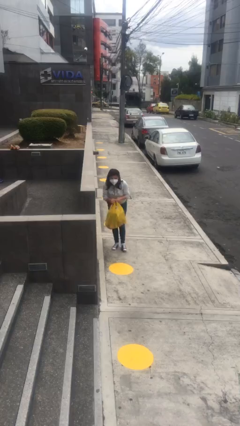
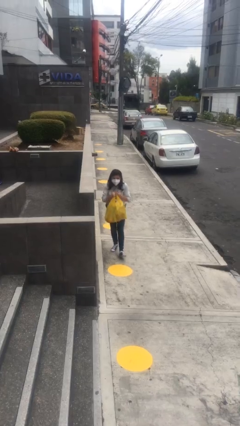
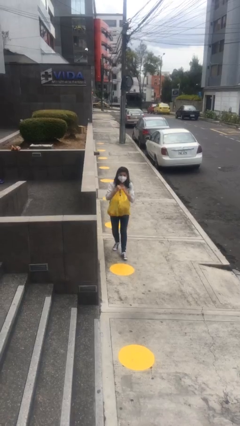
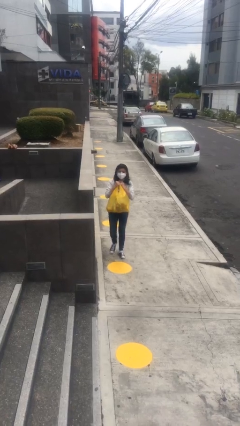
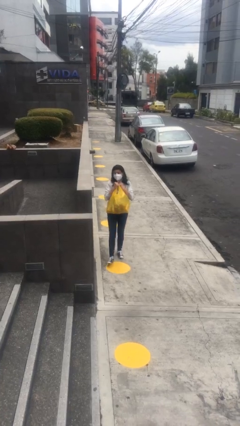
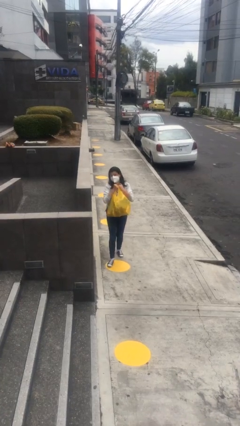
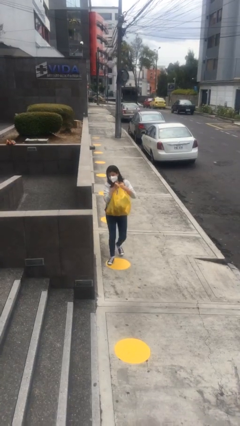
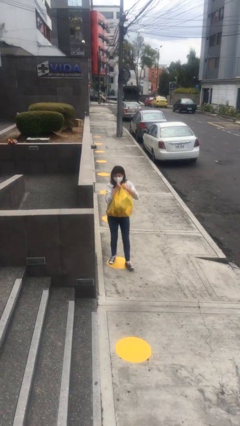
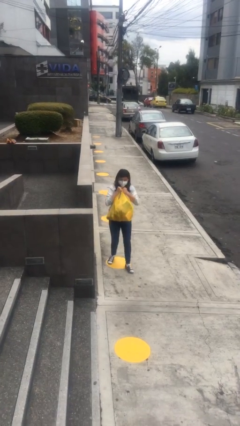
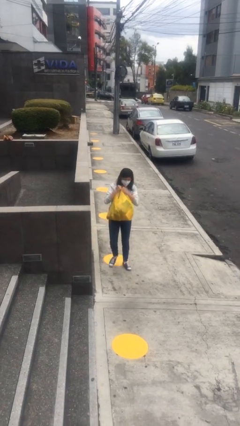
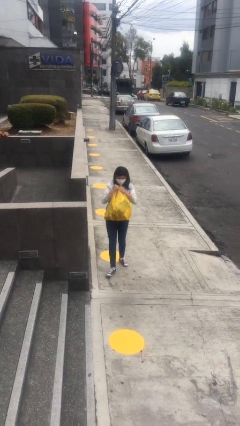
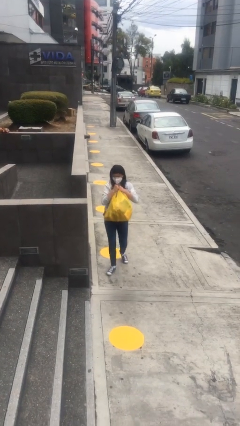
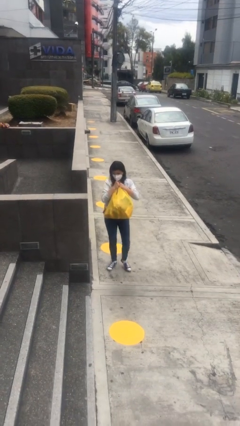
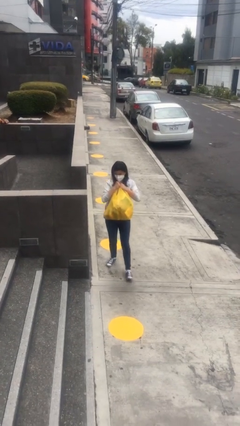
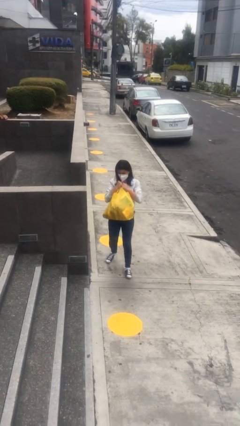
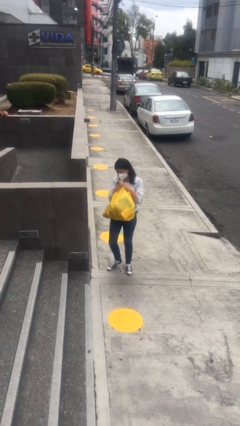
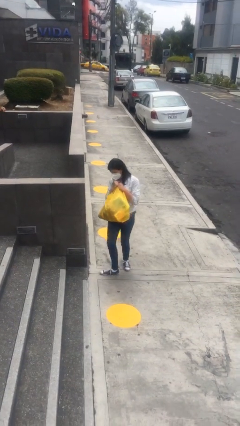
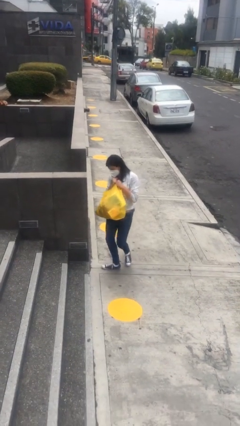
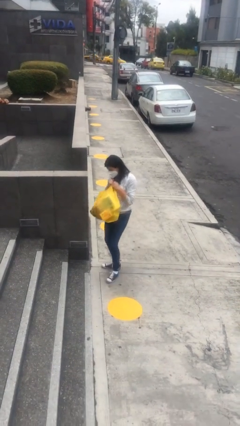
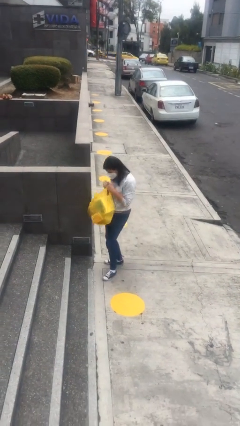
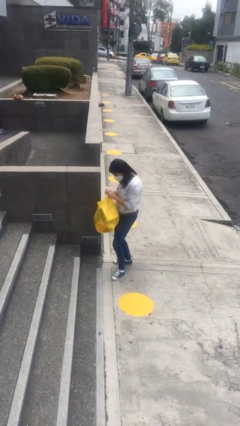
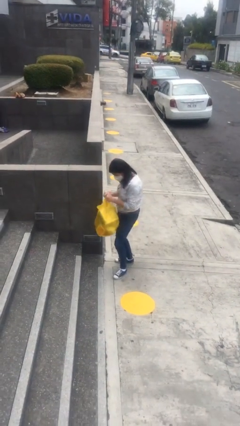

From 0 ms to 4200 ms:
person carries heavy object

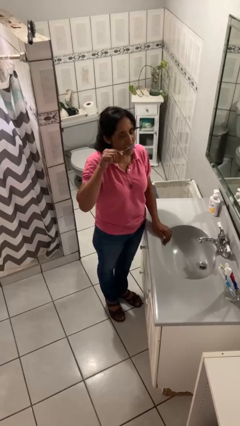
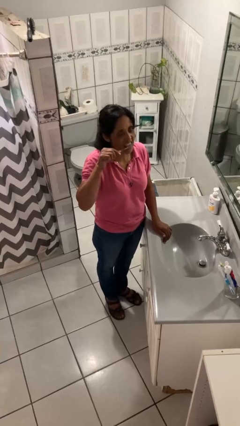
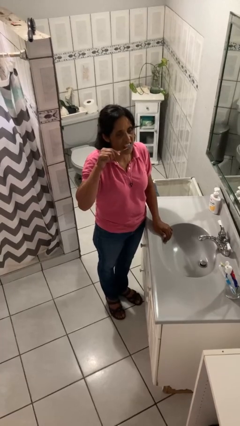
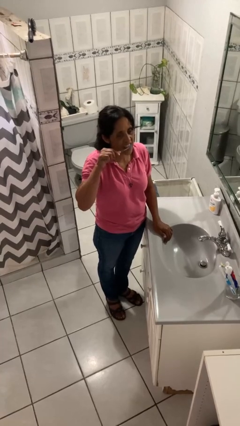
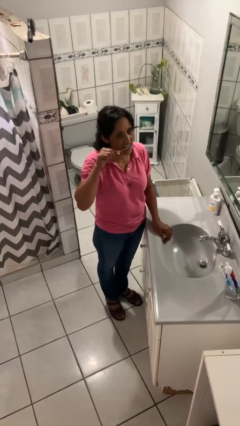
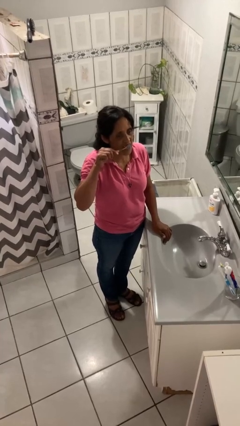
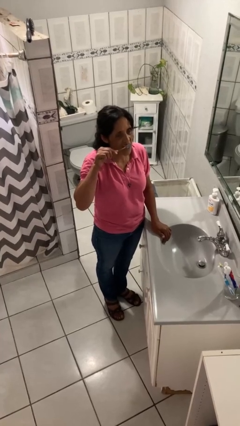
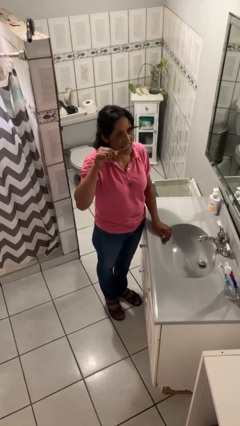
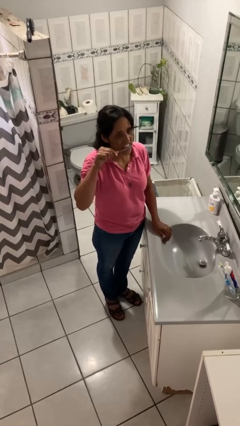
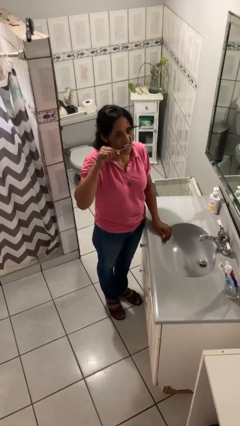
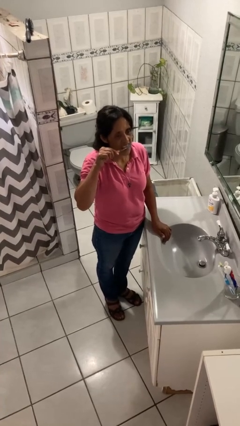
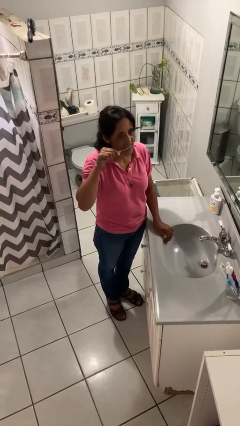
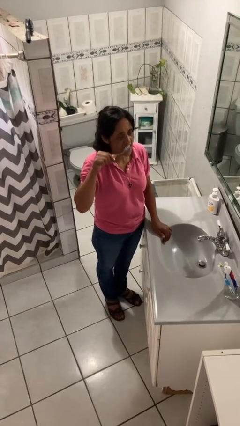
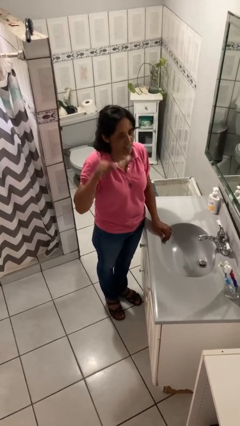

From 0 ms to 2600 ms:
person brushes teeth

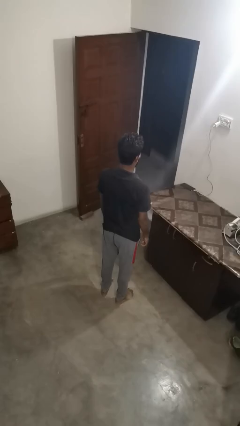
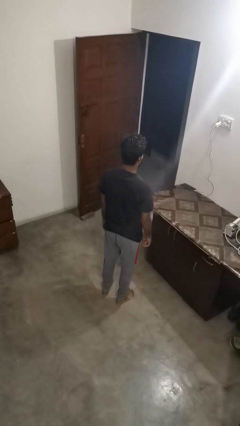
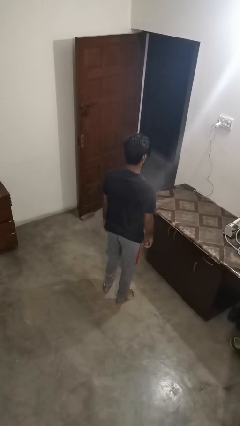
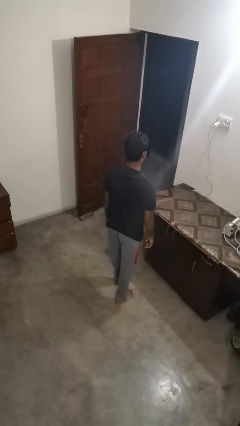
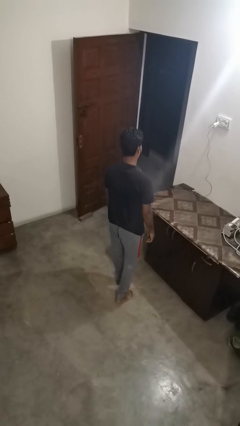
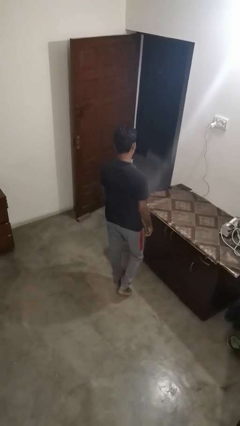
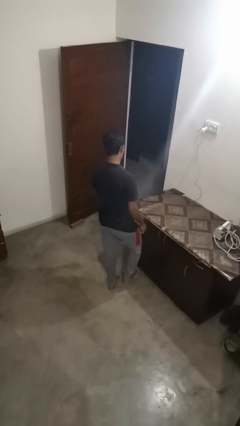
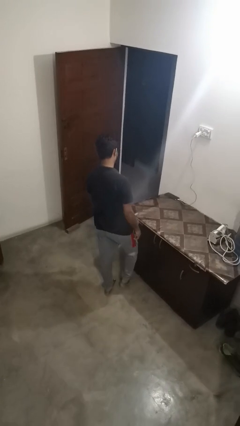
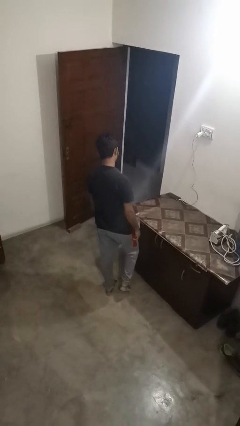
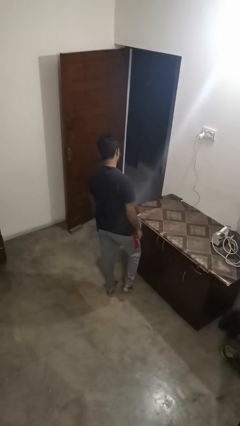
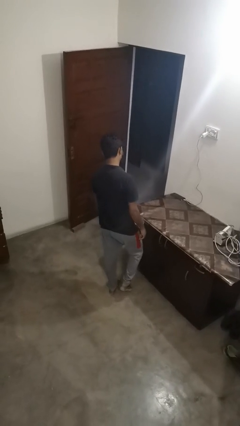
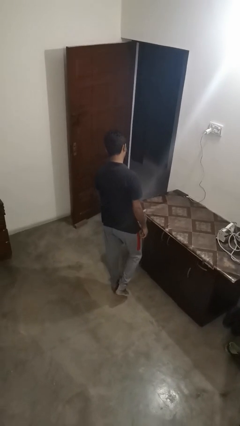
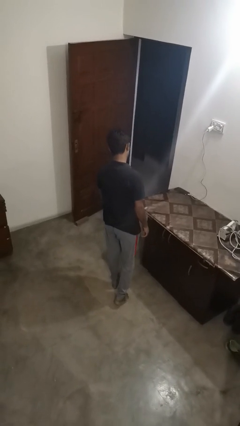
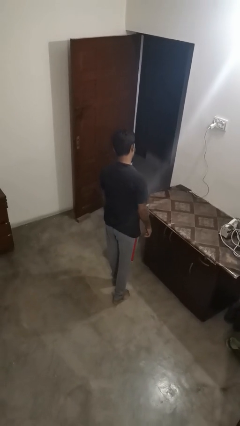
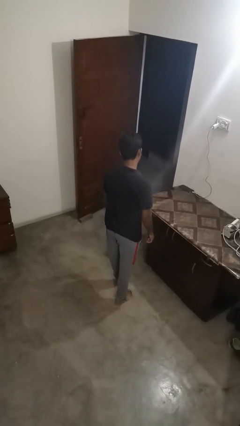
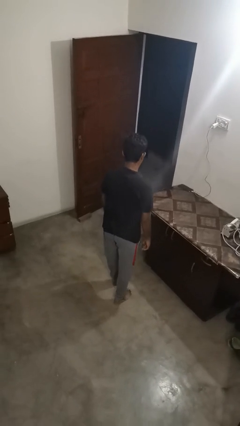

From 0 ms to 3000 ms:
person bumps into table

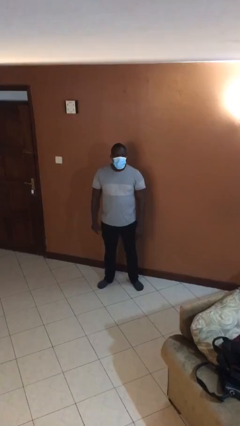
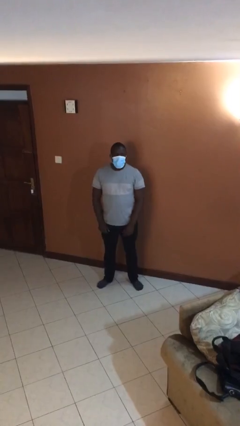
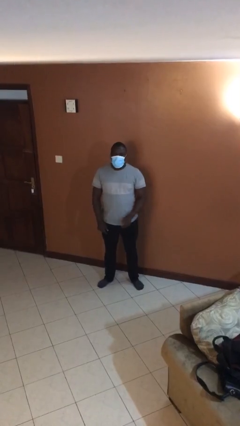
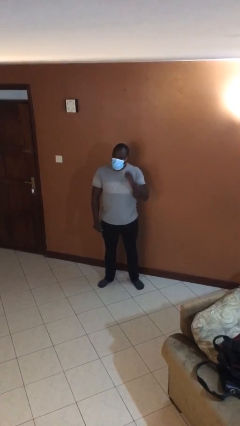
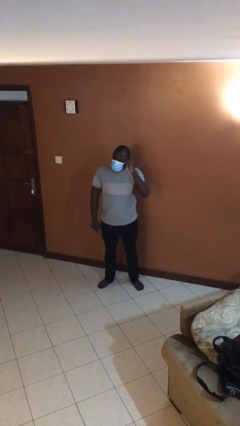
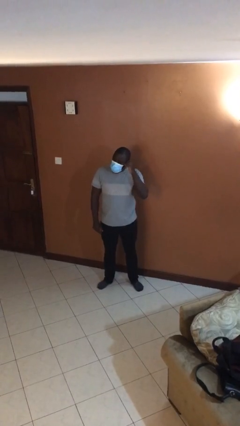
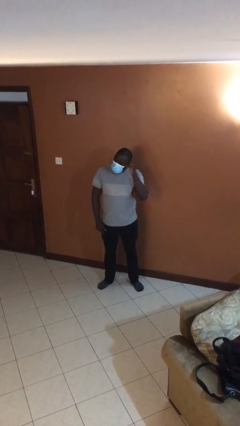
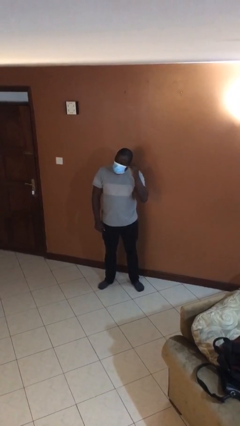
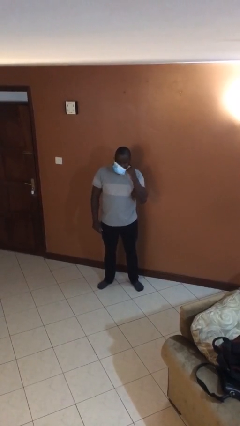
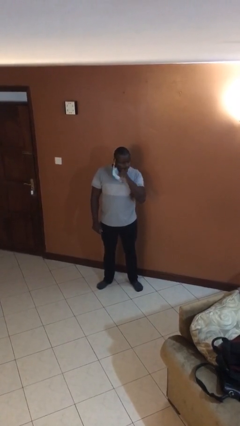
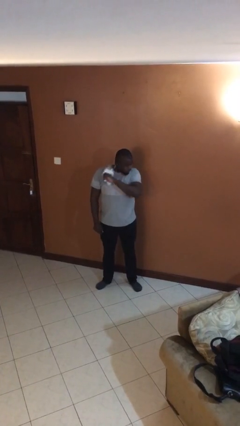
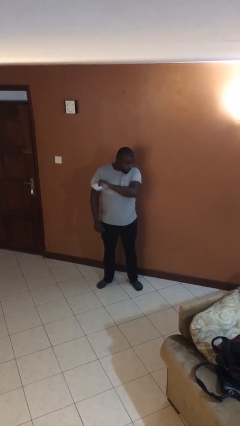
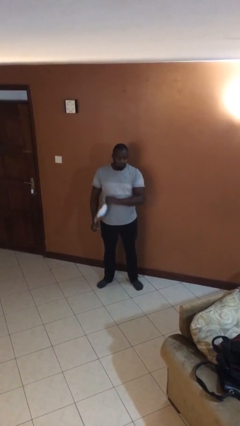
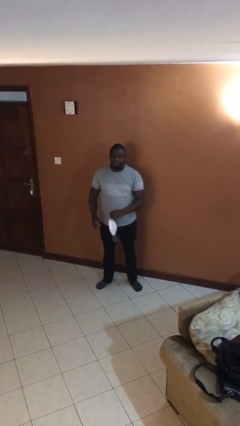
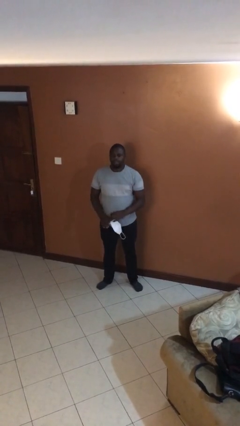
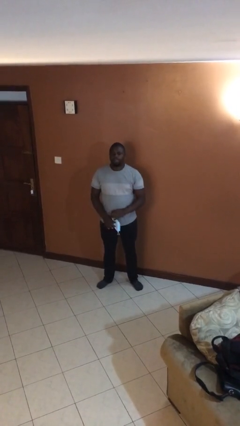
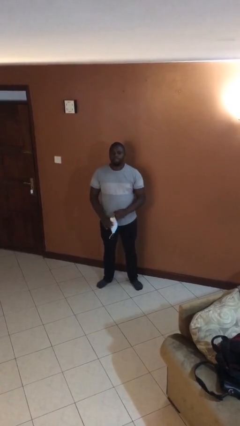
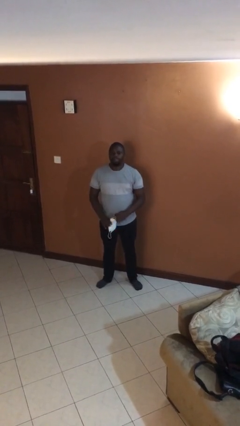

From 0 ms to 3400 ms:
person takes off facemask

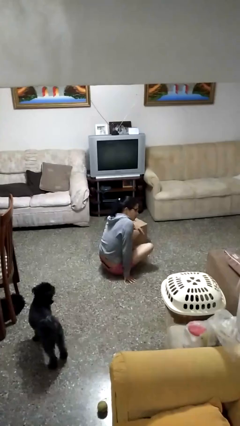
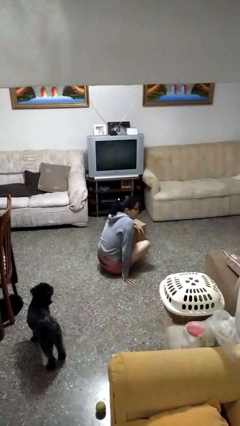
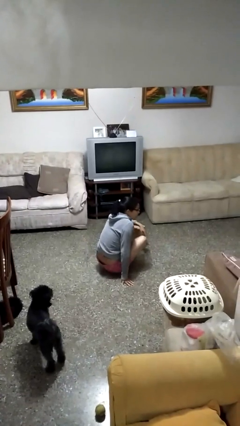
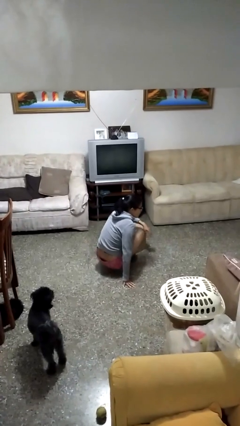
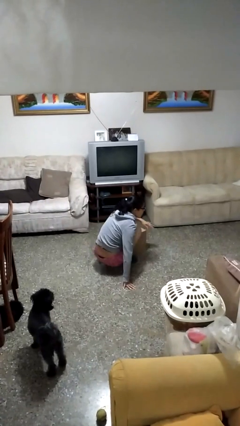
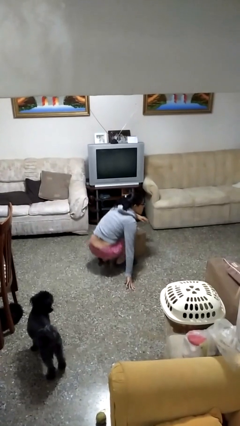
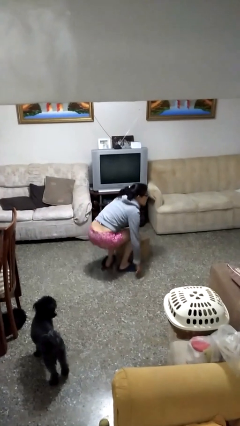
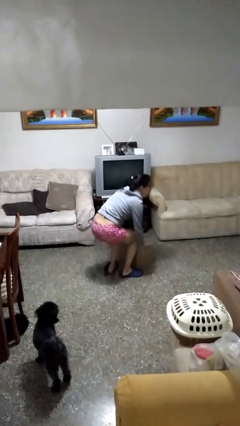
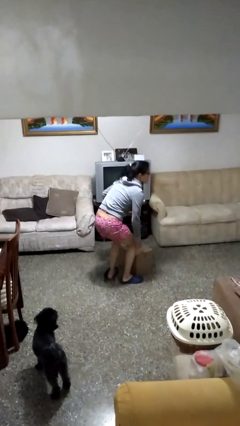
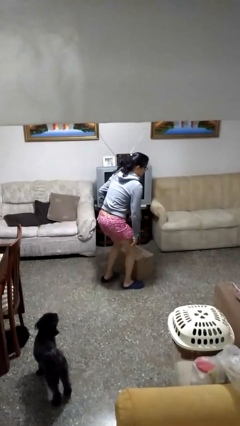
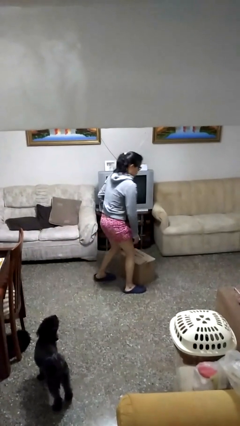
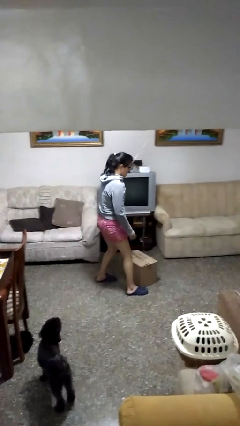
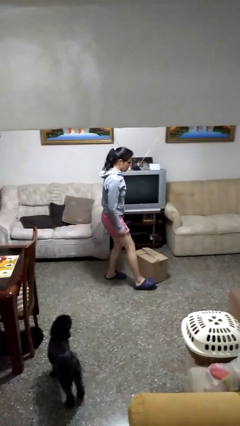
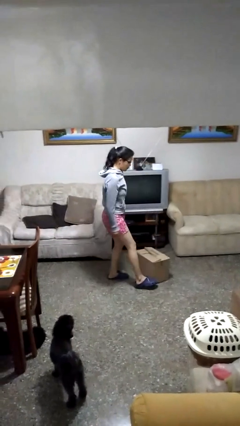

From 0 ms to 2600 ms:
person stands up from floor

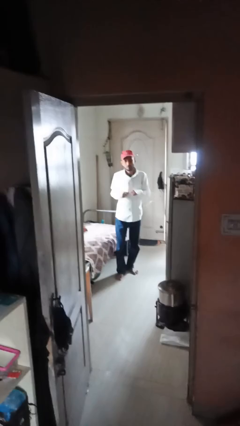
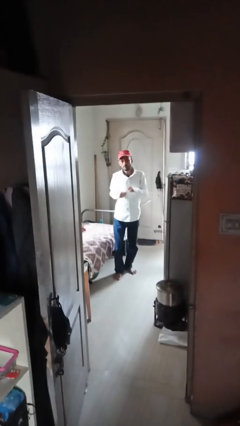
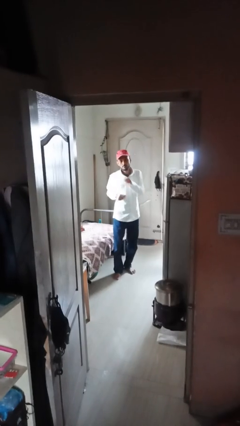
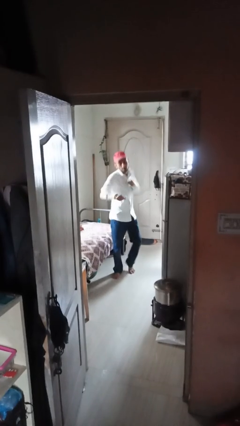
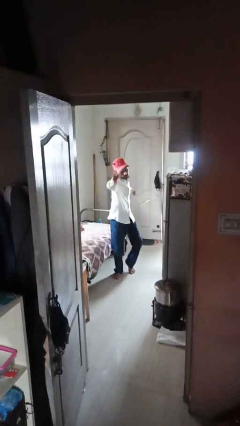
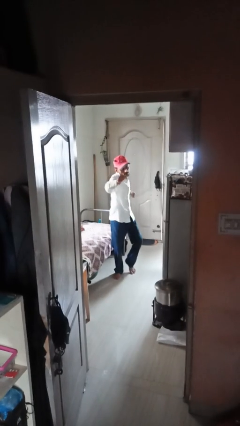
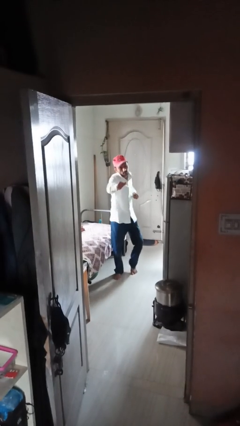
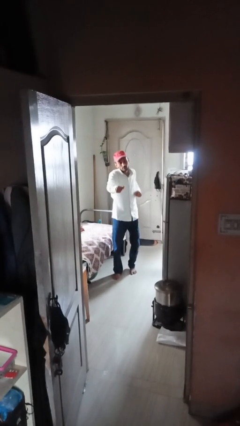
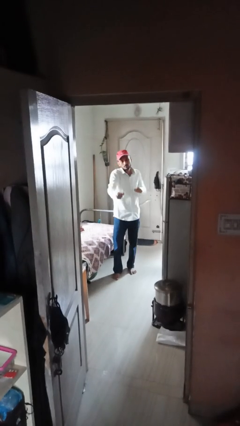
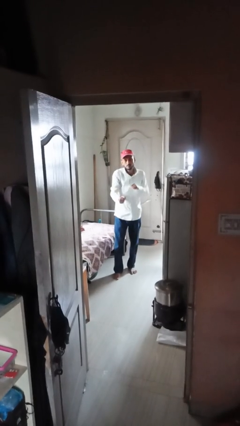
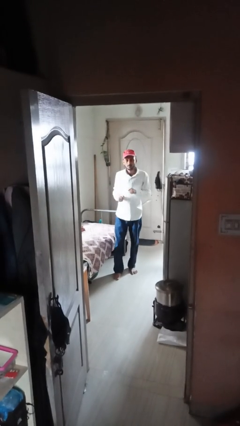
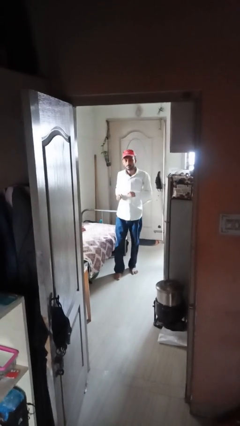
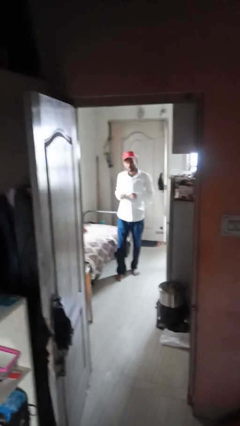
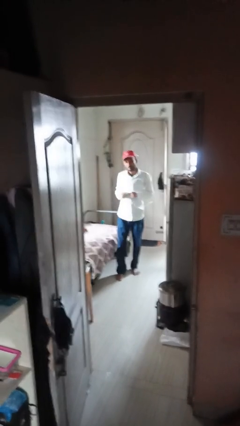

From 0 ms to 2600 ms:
person punches
